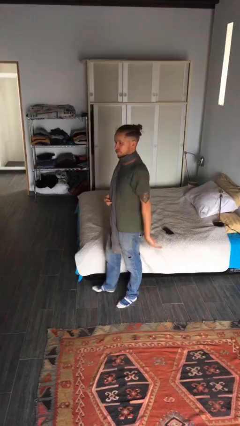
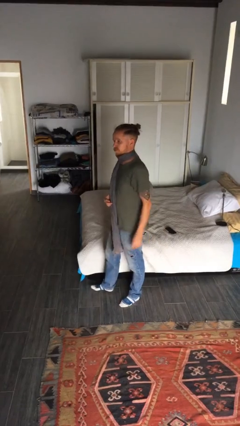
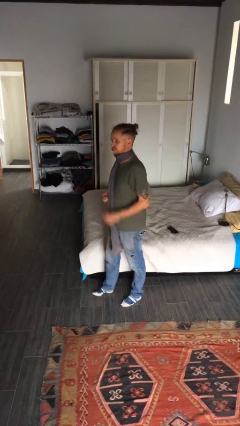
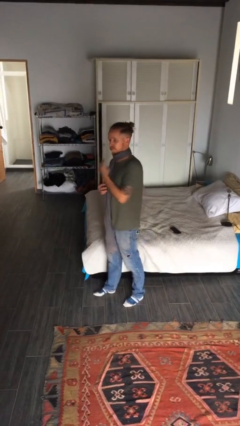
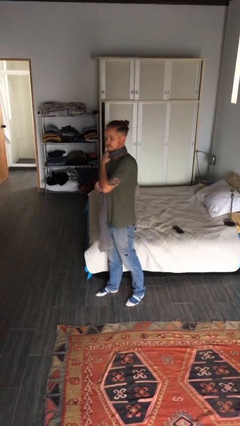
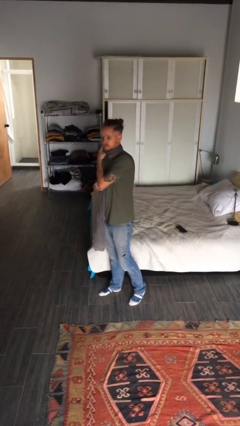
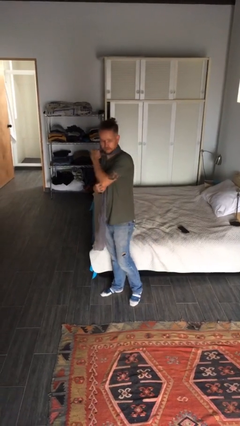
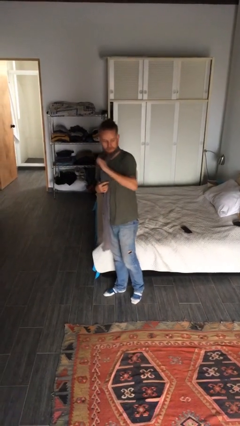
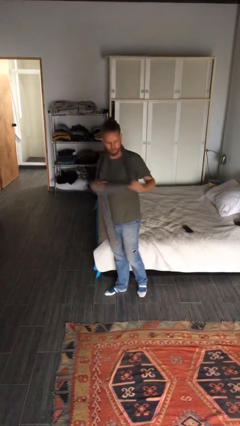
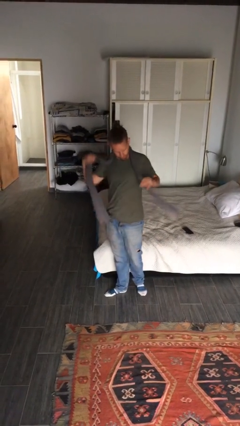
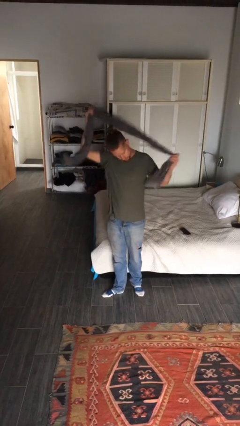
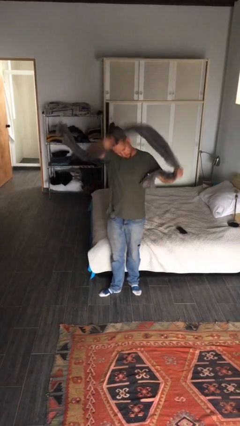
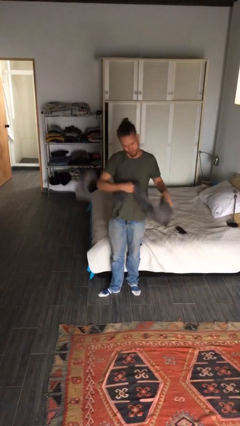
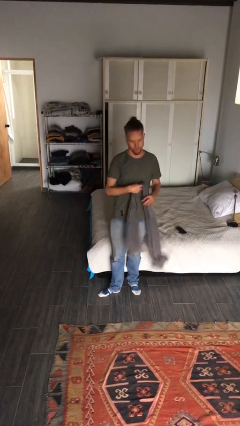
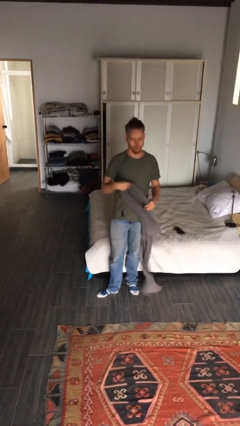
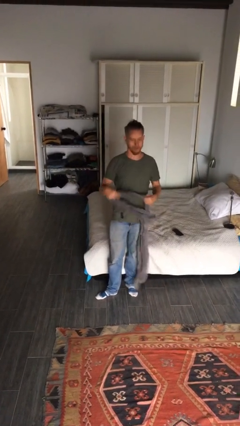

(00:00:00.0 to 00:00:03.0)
person takes off scarf

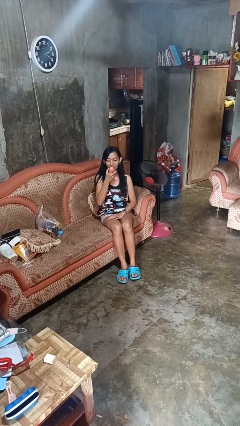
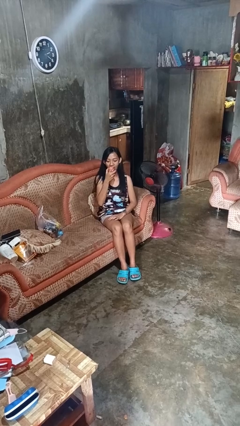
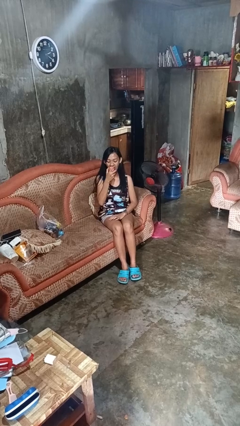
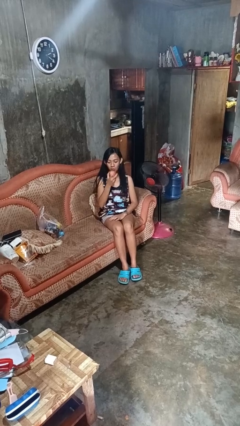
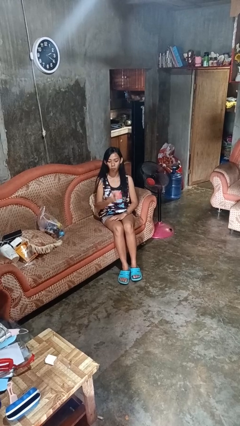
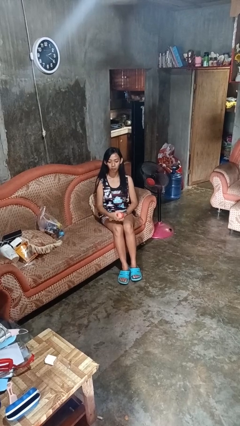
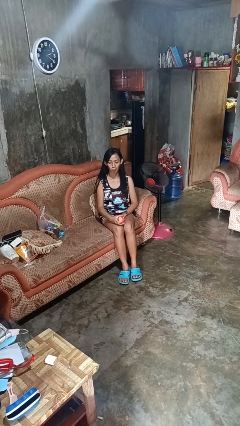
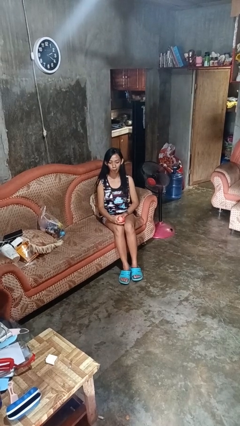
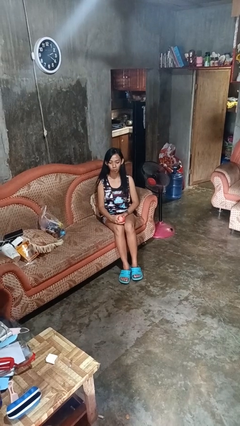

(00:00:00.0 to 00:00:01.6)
person eats apple

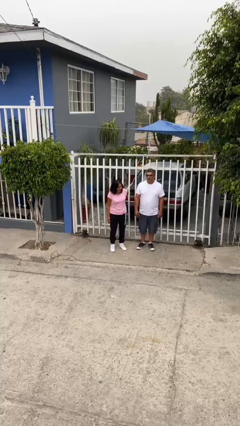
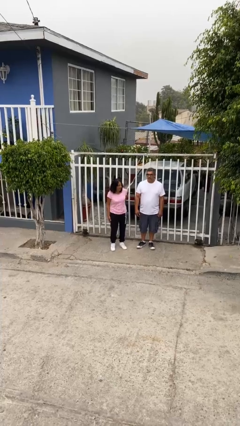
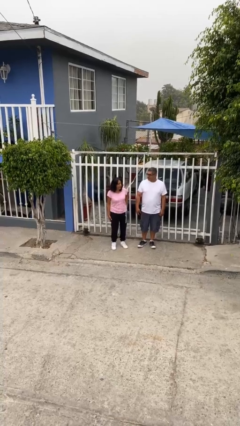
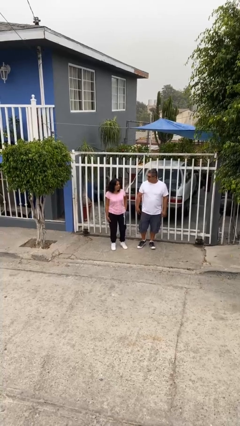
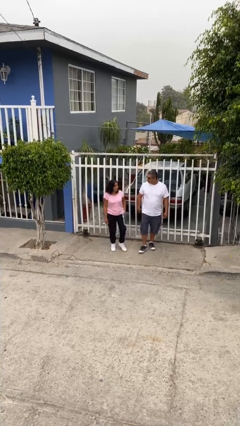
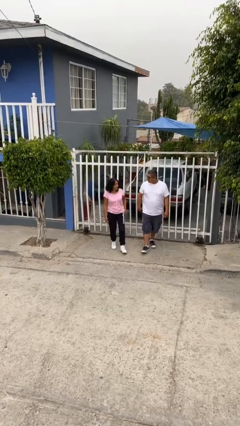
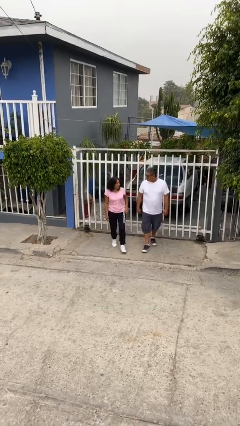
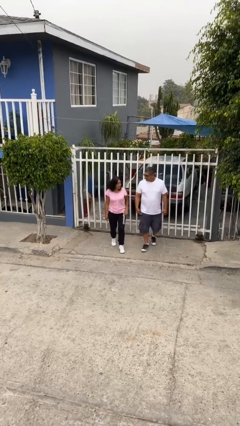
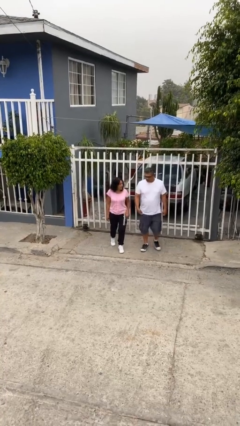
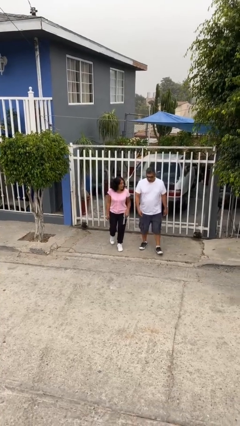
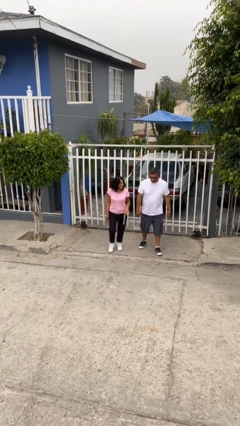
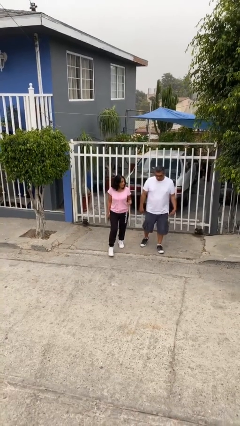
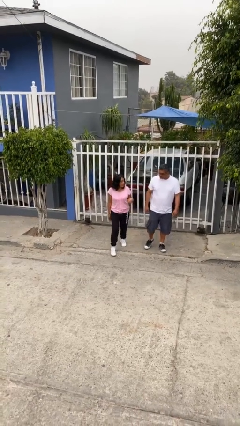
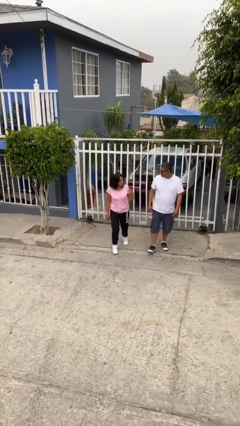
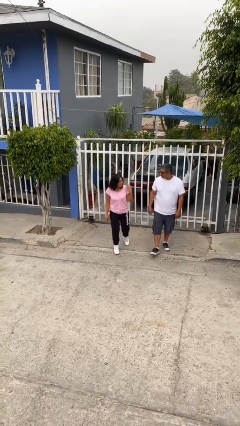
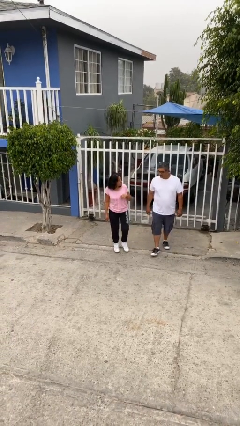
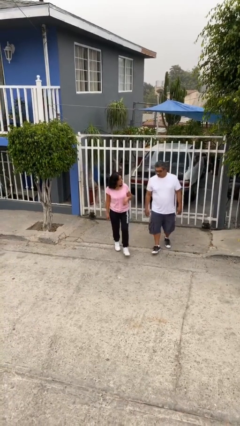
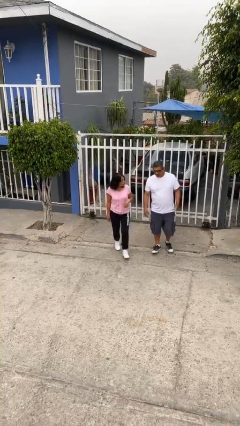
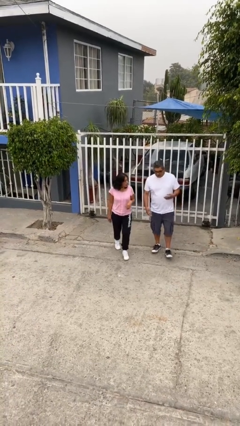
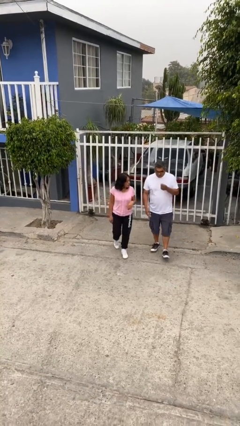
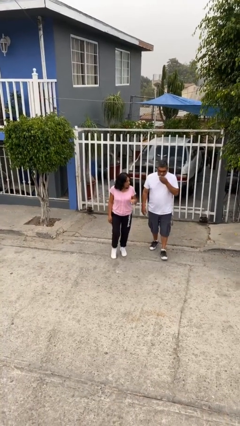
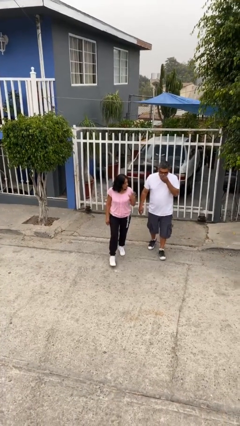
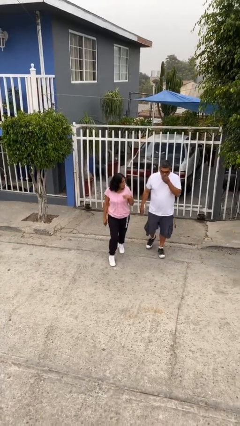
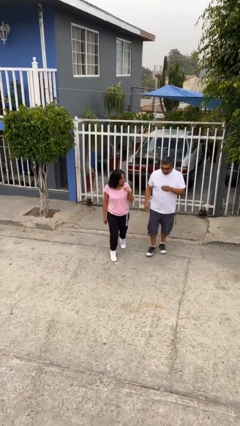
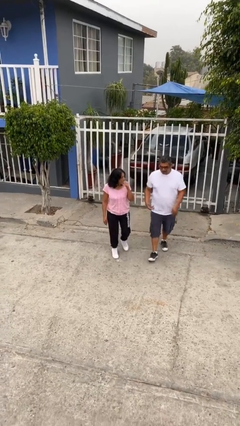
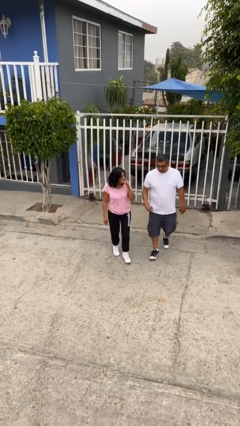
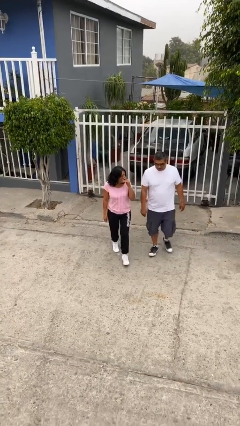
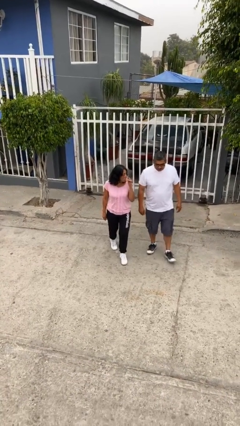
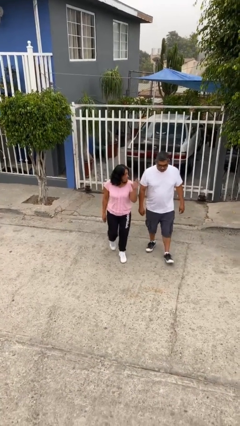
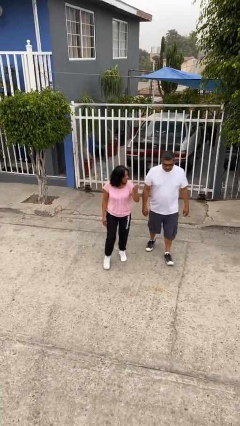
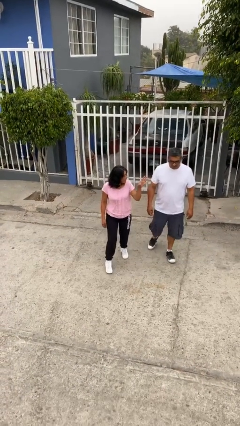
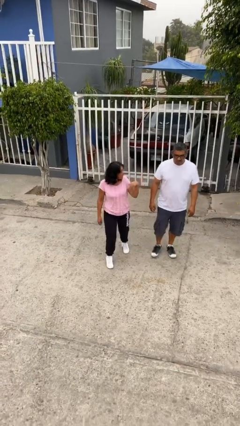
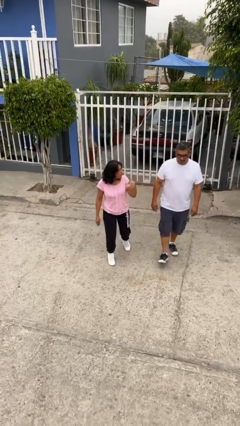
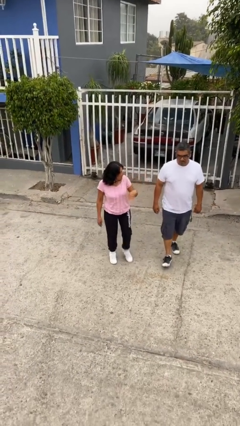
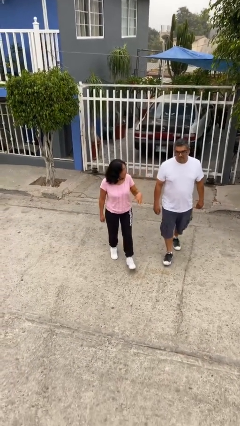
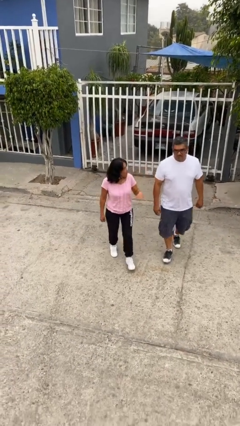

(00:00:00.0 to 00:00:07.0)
person talks to person

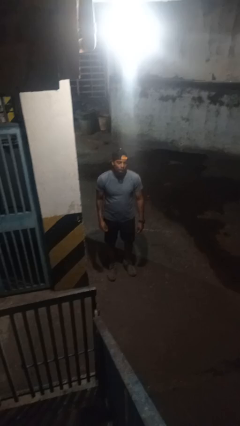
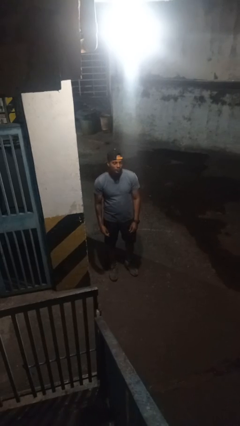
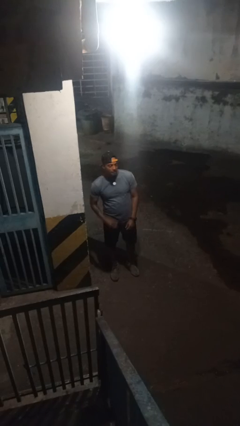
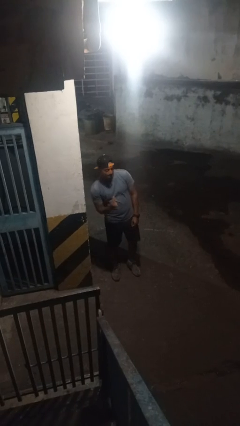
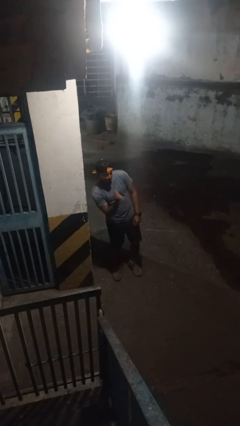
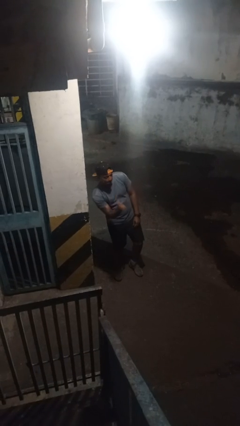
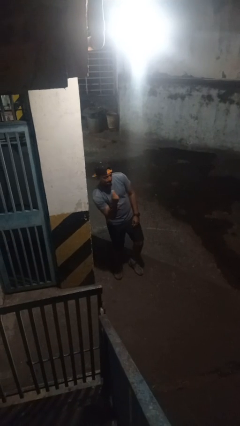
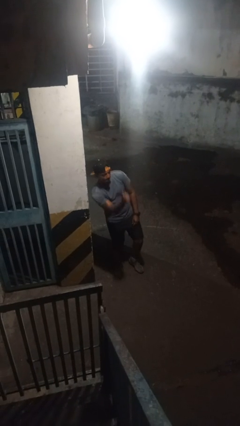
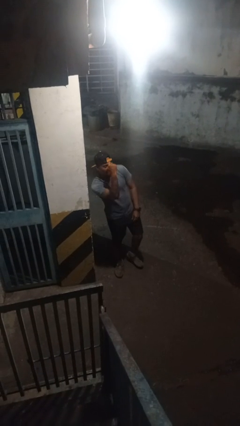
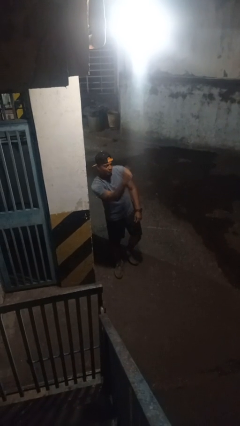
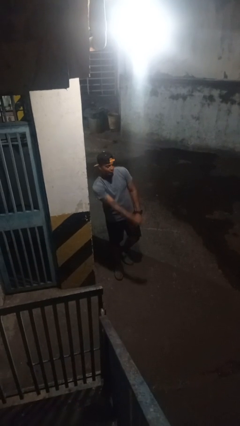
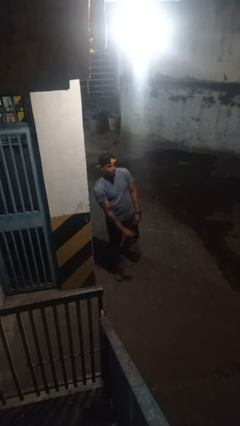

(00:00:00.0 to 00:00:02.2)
person snaps fingers

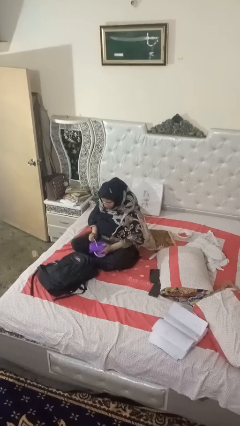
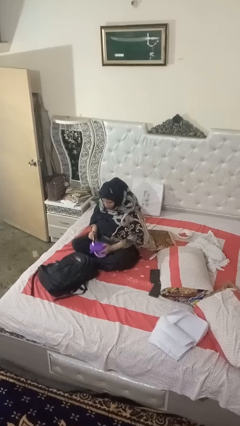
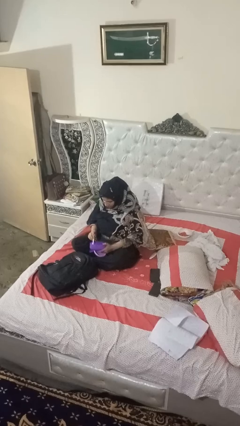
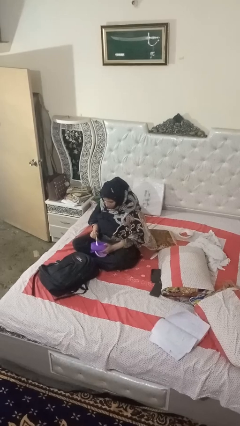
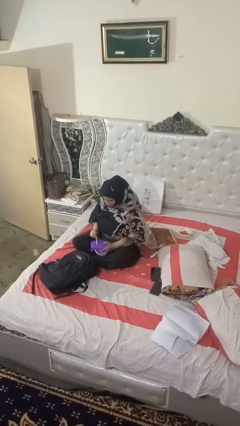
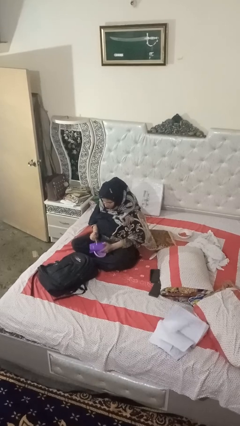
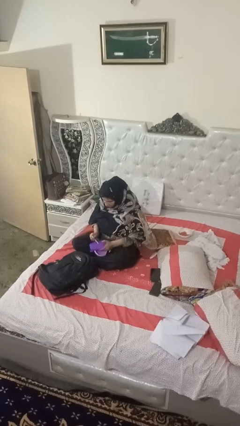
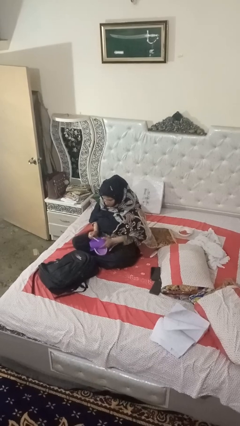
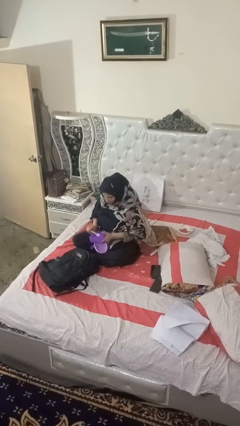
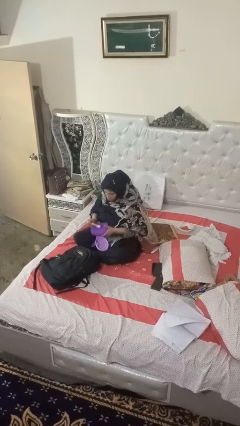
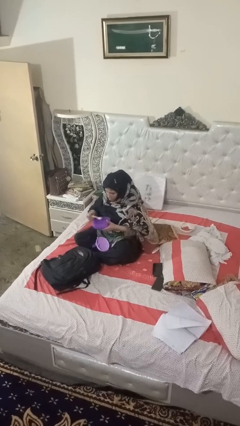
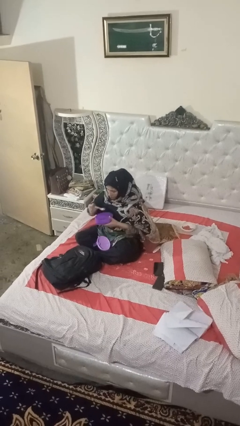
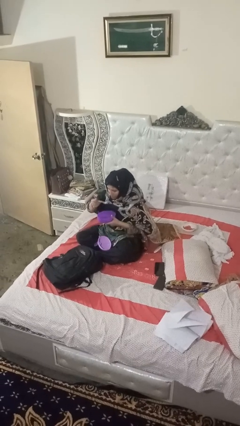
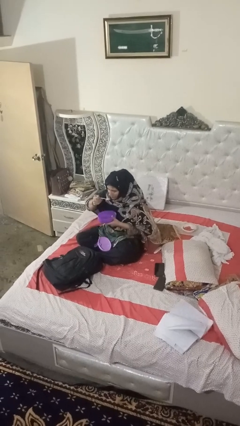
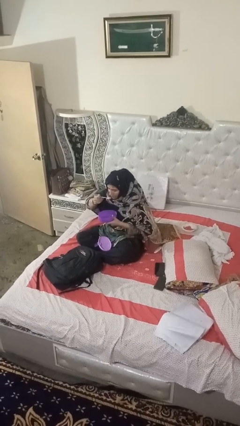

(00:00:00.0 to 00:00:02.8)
person eats snack from bag

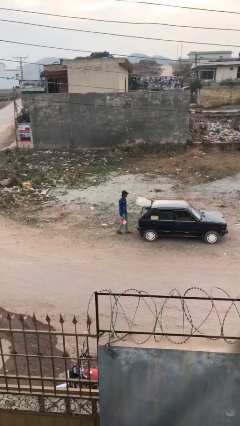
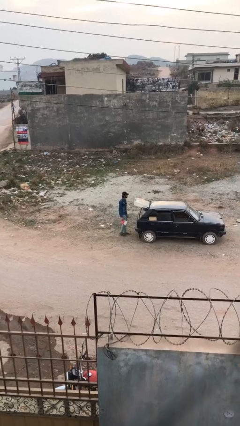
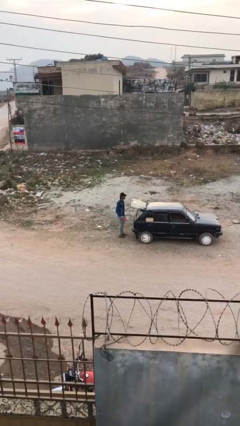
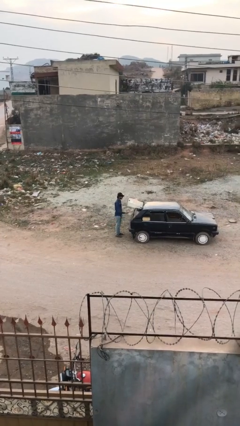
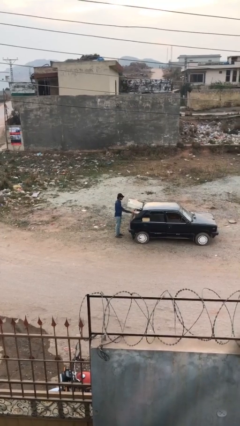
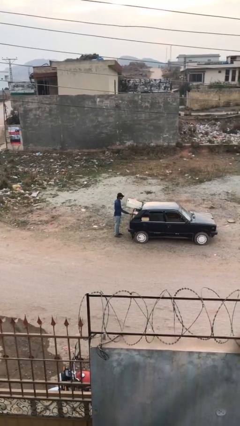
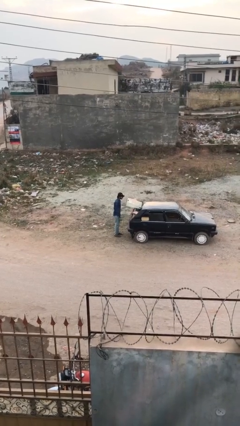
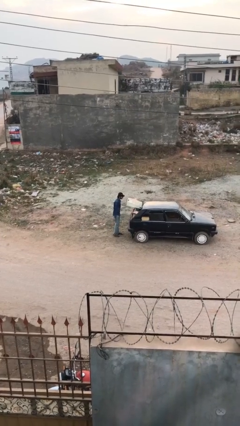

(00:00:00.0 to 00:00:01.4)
person loads car
